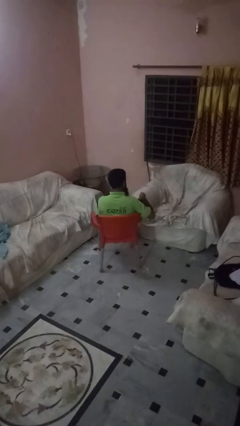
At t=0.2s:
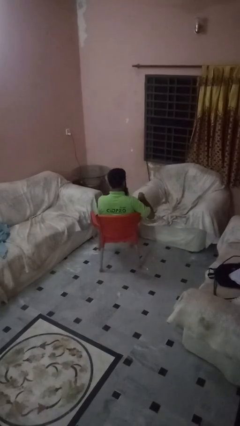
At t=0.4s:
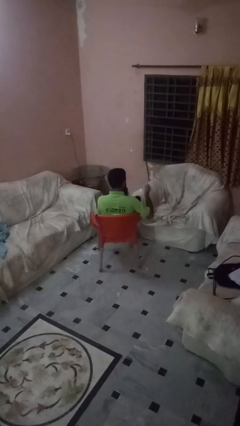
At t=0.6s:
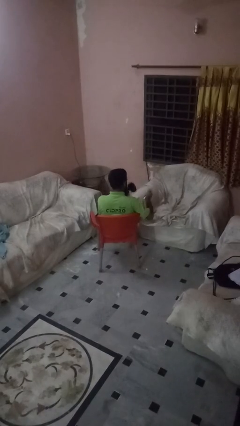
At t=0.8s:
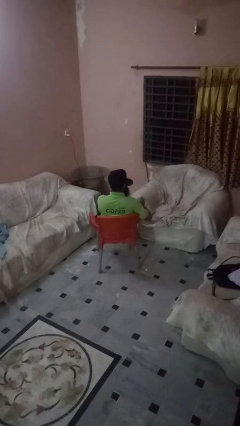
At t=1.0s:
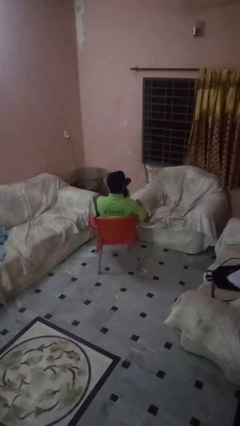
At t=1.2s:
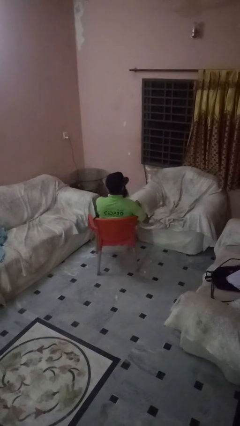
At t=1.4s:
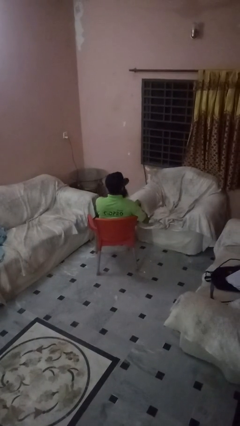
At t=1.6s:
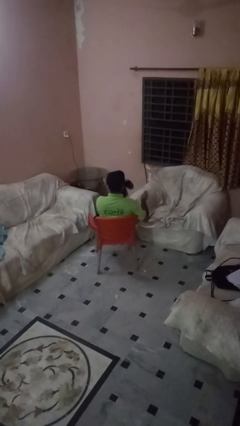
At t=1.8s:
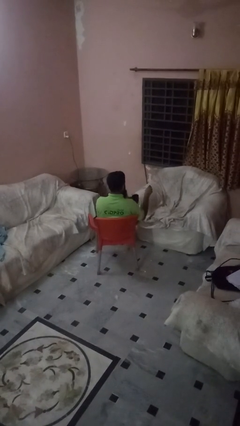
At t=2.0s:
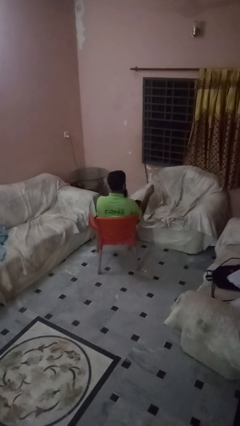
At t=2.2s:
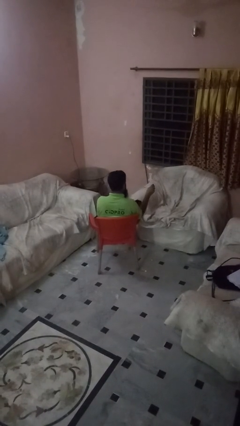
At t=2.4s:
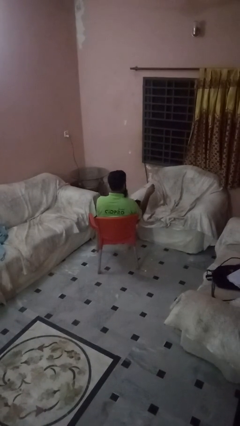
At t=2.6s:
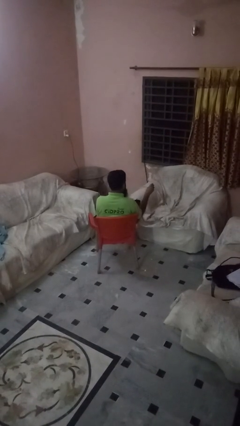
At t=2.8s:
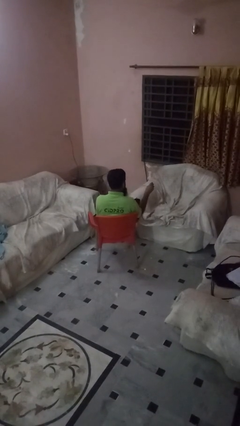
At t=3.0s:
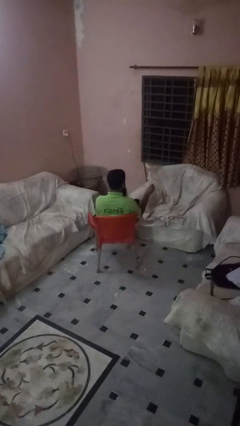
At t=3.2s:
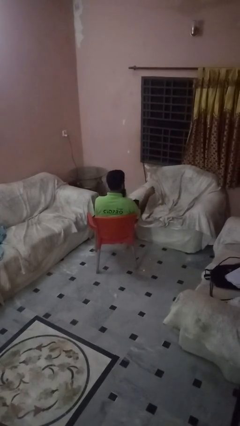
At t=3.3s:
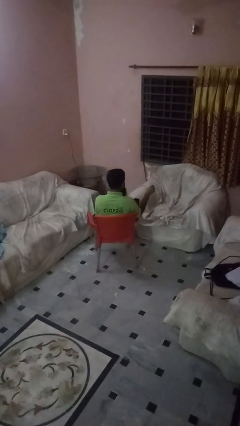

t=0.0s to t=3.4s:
person drinks from mug

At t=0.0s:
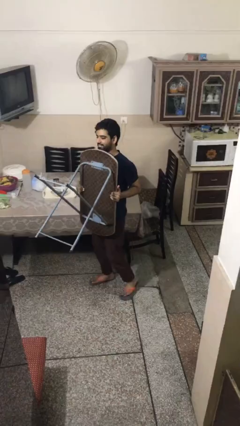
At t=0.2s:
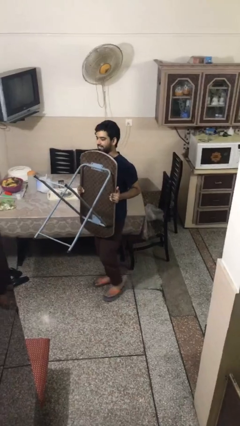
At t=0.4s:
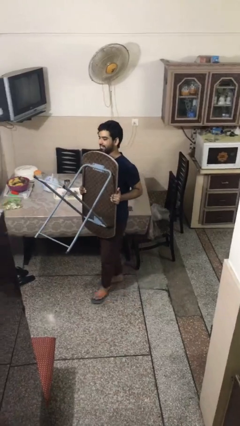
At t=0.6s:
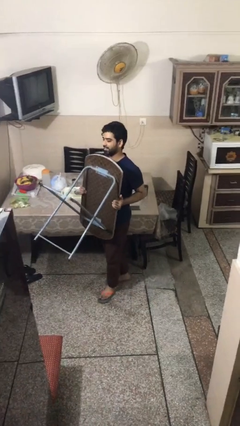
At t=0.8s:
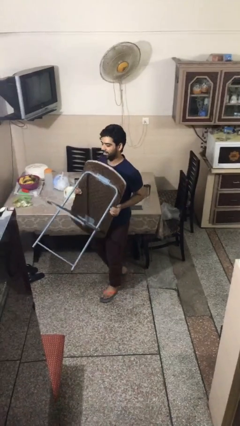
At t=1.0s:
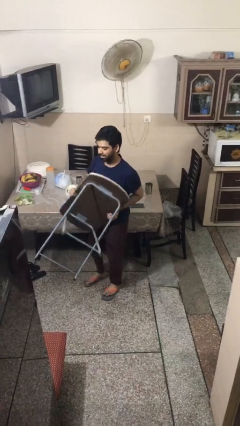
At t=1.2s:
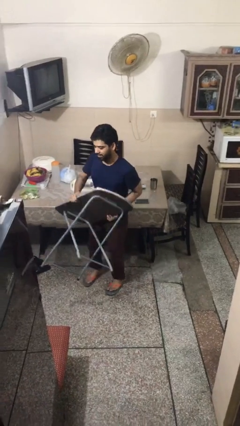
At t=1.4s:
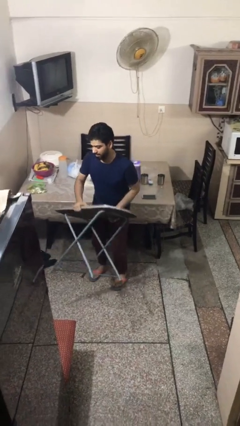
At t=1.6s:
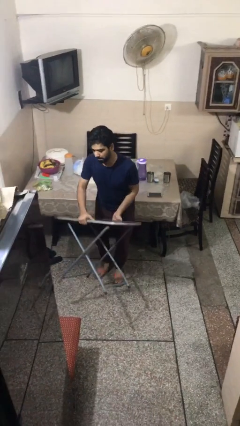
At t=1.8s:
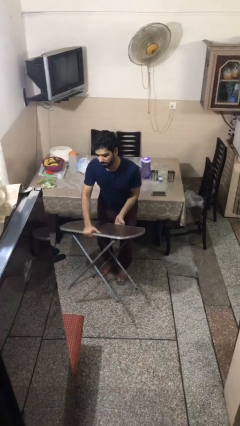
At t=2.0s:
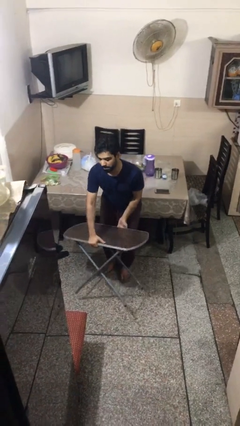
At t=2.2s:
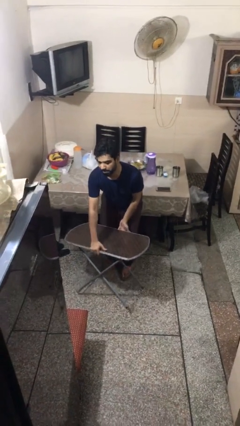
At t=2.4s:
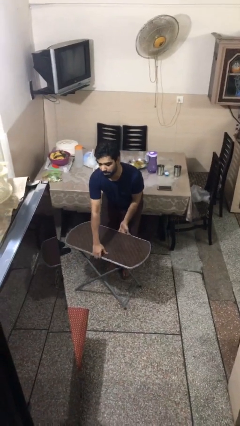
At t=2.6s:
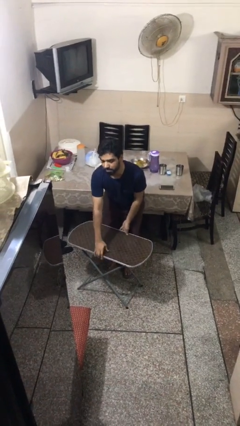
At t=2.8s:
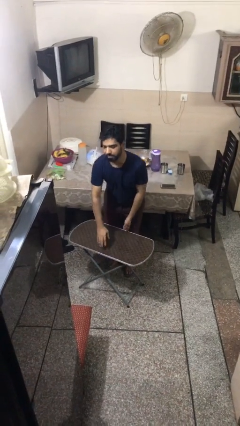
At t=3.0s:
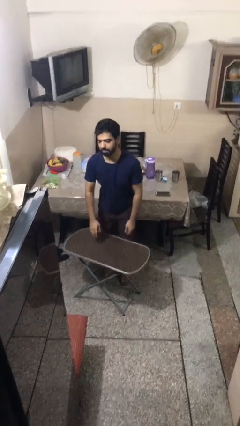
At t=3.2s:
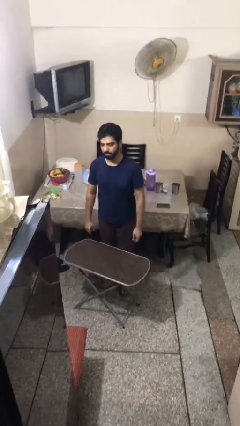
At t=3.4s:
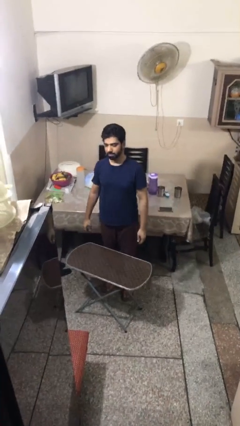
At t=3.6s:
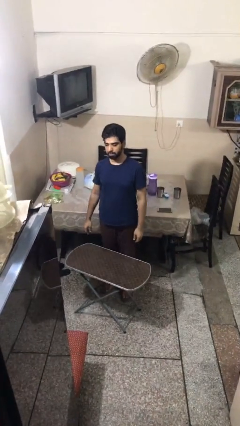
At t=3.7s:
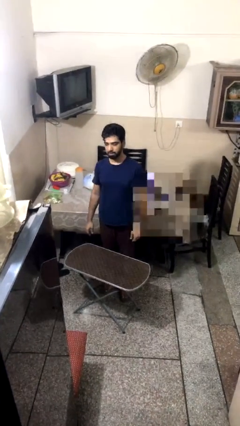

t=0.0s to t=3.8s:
person puts down object on floor

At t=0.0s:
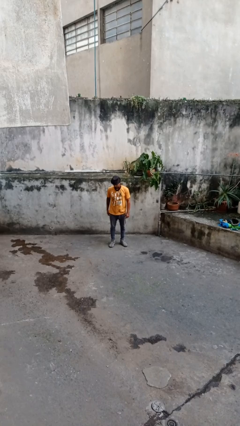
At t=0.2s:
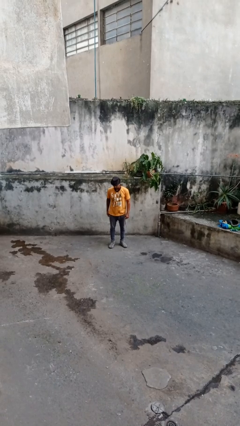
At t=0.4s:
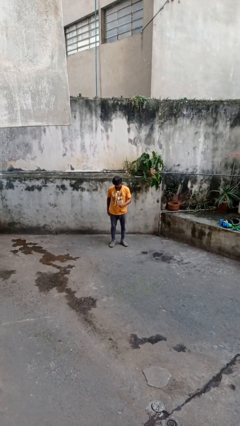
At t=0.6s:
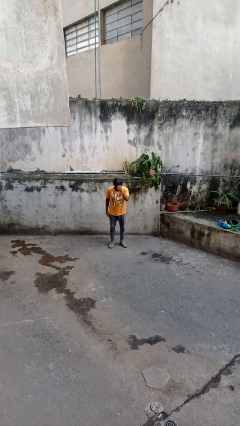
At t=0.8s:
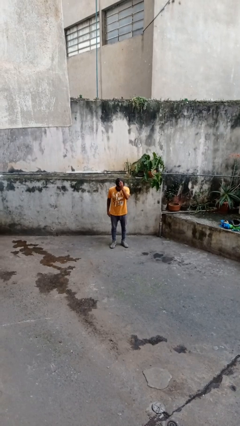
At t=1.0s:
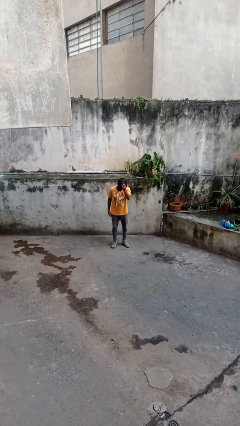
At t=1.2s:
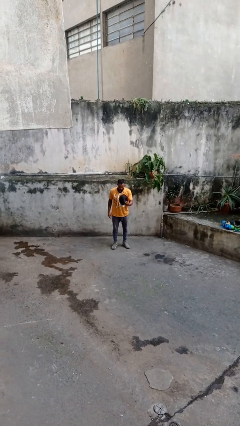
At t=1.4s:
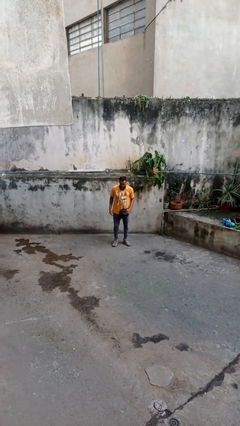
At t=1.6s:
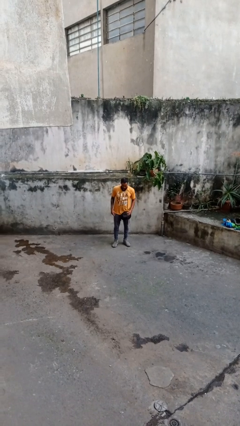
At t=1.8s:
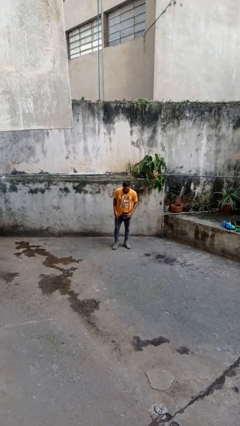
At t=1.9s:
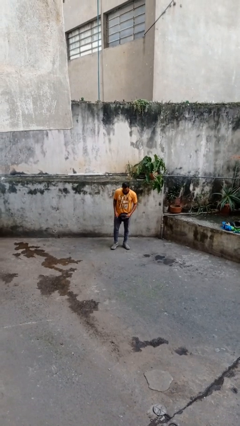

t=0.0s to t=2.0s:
person takes off hat

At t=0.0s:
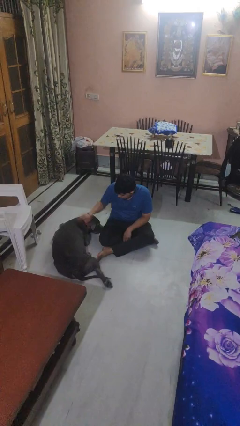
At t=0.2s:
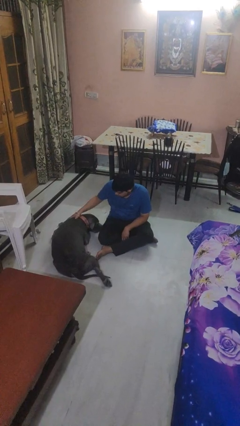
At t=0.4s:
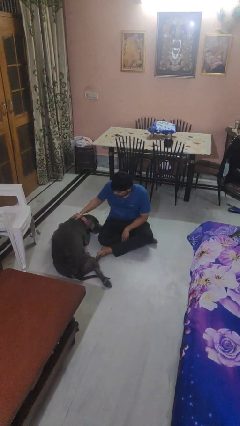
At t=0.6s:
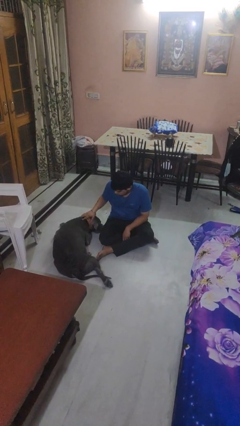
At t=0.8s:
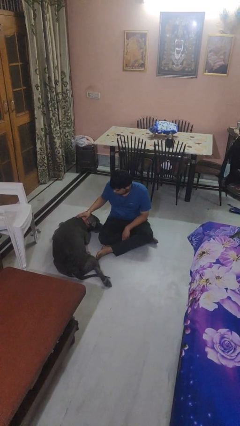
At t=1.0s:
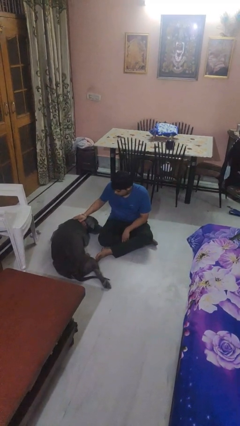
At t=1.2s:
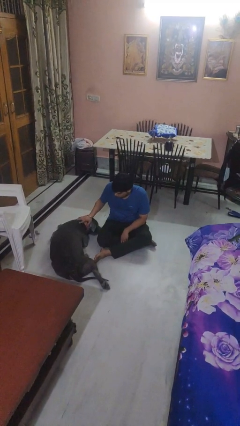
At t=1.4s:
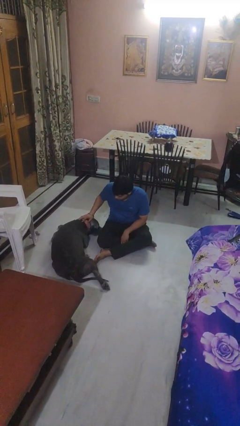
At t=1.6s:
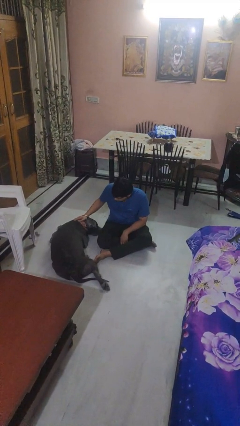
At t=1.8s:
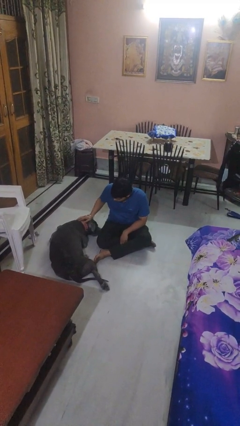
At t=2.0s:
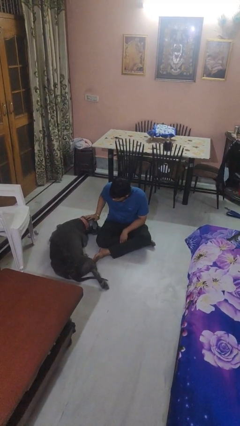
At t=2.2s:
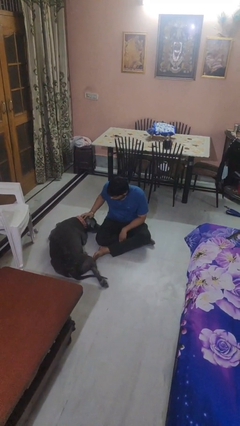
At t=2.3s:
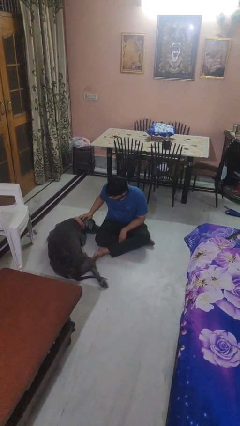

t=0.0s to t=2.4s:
person pets dog

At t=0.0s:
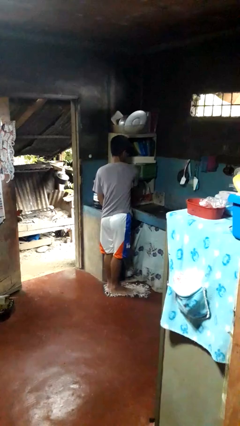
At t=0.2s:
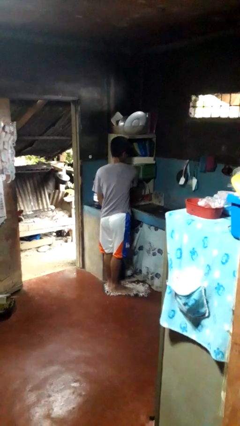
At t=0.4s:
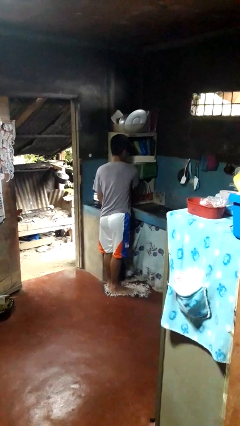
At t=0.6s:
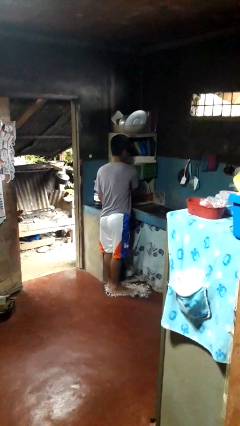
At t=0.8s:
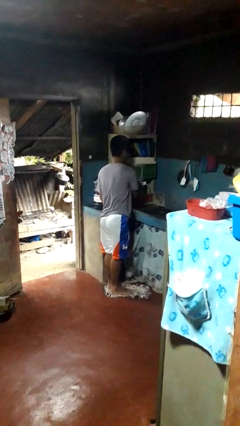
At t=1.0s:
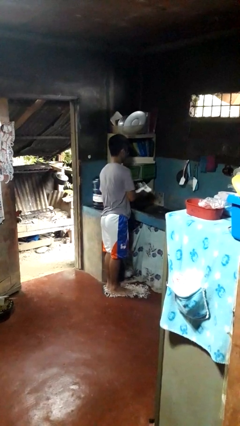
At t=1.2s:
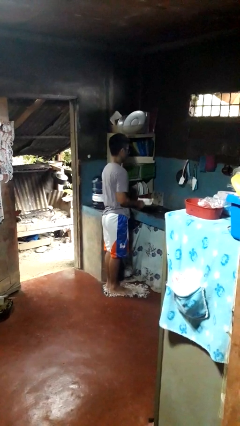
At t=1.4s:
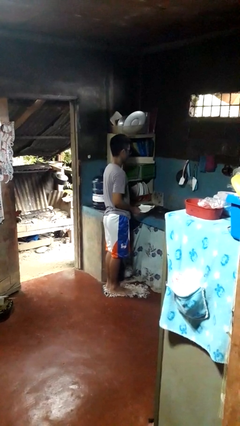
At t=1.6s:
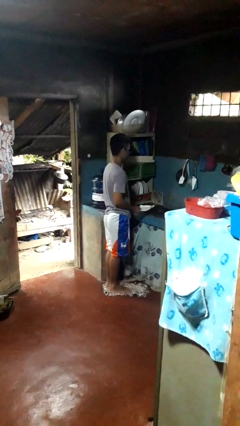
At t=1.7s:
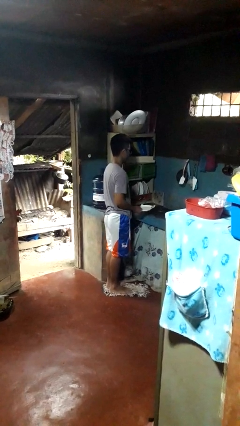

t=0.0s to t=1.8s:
person unloads dishwasher

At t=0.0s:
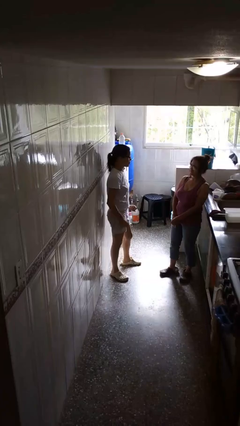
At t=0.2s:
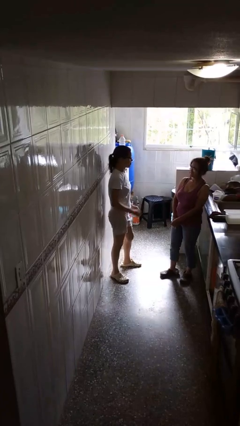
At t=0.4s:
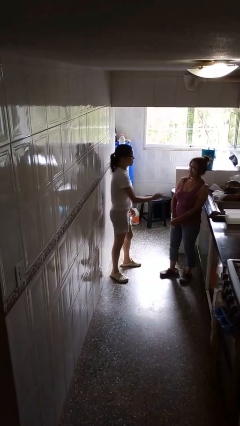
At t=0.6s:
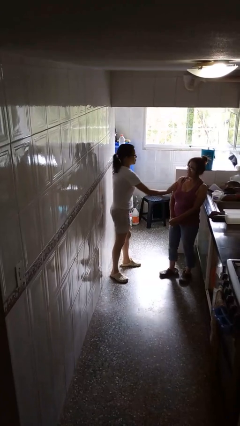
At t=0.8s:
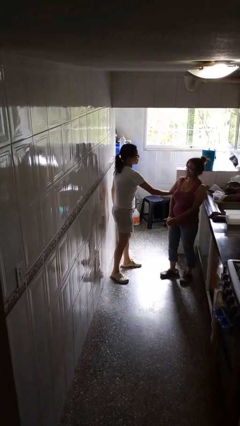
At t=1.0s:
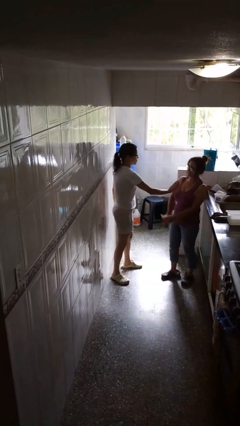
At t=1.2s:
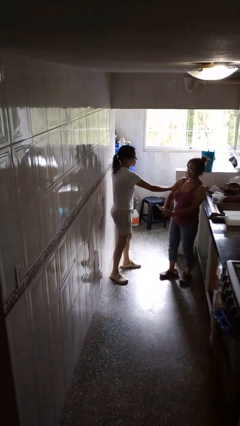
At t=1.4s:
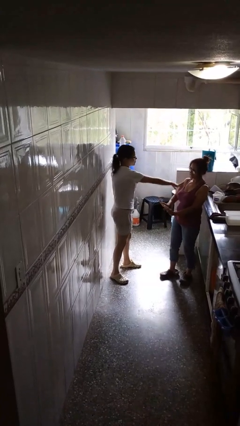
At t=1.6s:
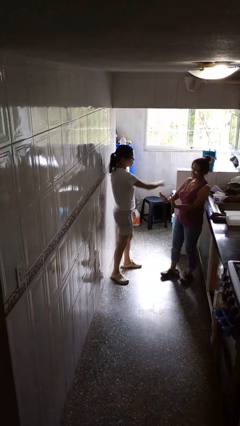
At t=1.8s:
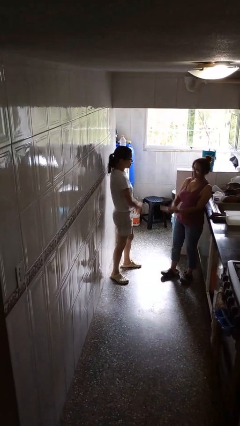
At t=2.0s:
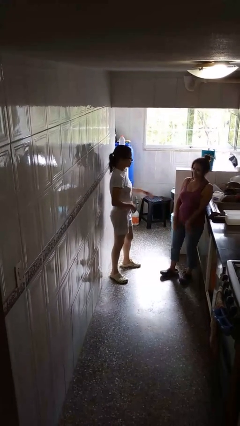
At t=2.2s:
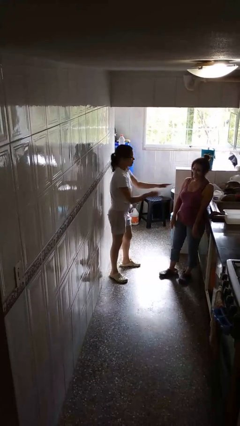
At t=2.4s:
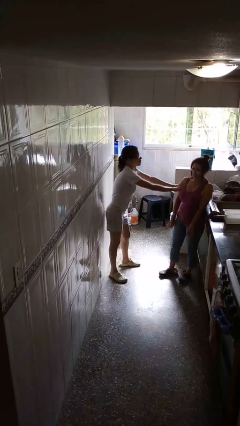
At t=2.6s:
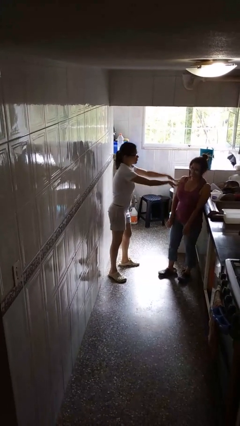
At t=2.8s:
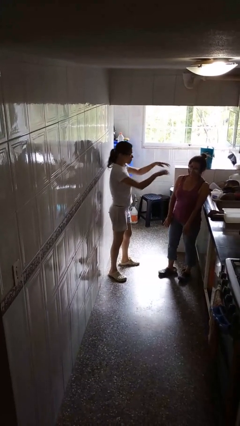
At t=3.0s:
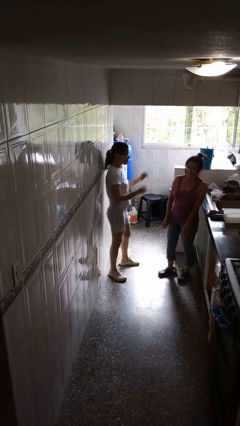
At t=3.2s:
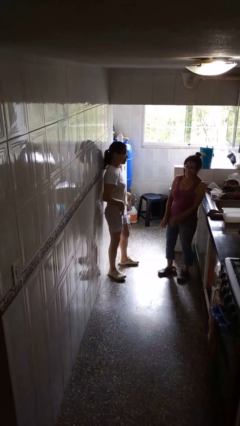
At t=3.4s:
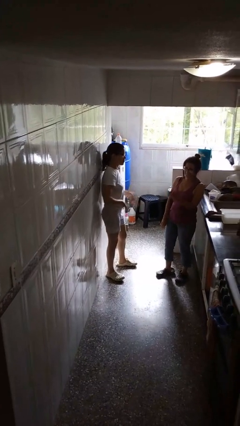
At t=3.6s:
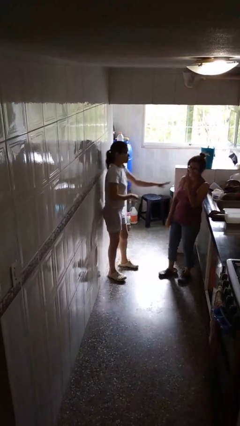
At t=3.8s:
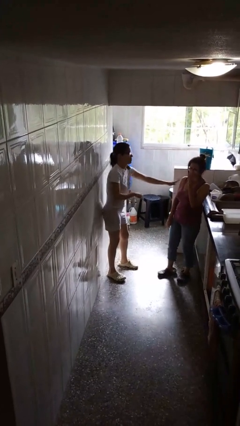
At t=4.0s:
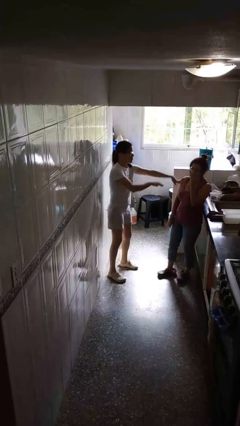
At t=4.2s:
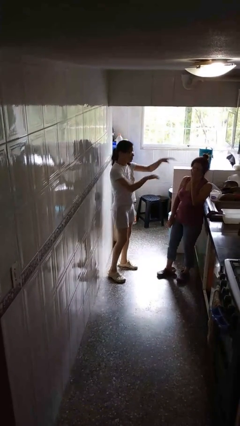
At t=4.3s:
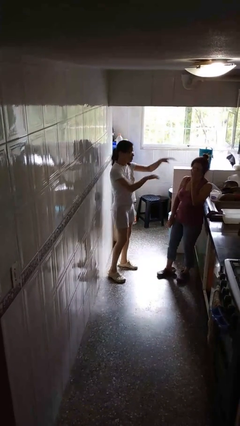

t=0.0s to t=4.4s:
person shoves person
